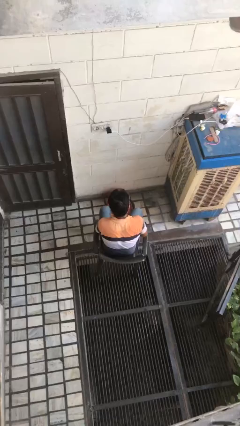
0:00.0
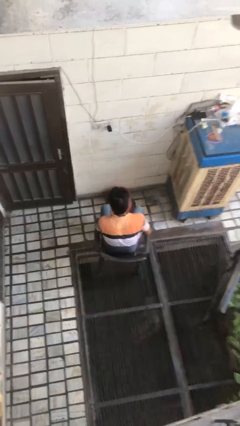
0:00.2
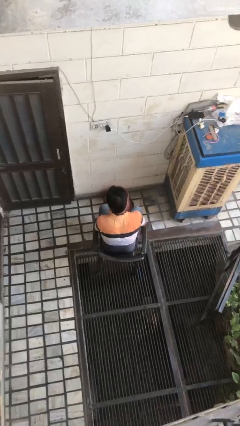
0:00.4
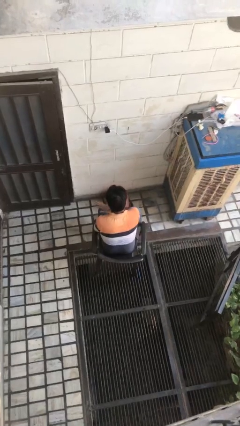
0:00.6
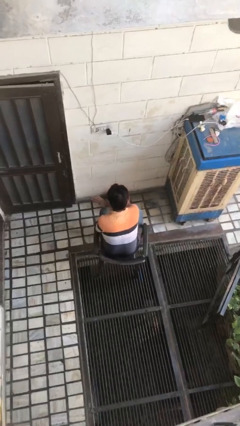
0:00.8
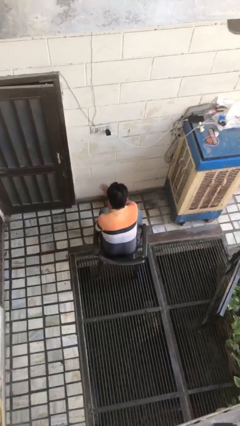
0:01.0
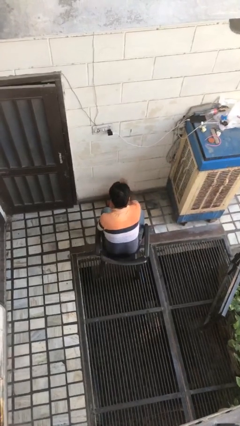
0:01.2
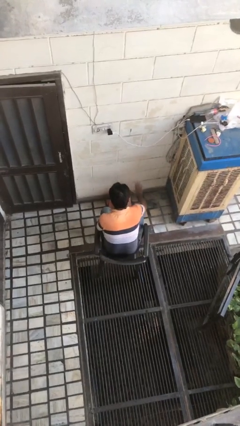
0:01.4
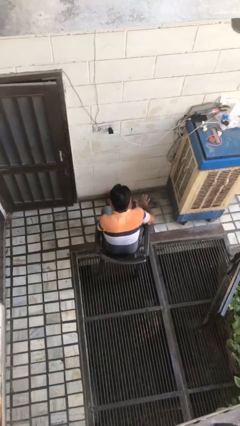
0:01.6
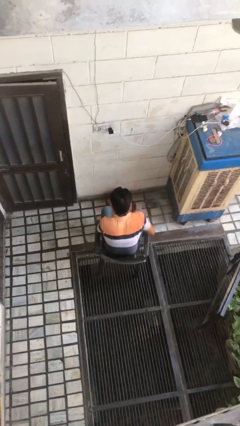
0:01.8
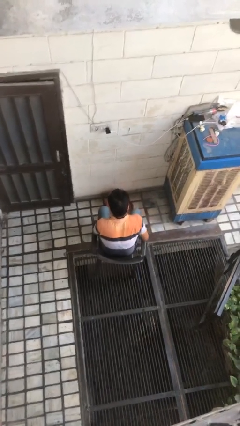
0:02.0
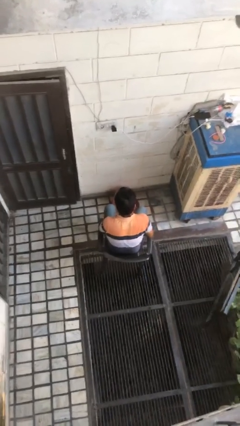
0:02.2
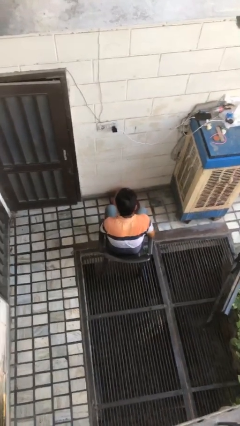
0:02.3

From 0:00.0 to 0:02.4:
person waves hand over object

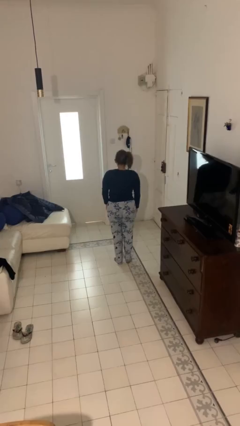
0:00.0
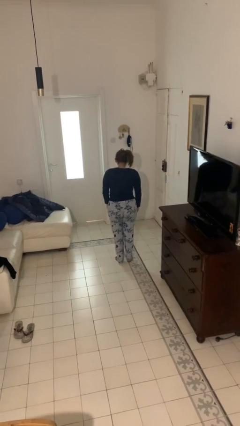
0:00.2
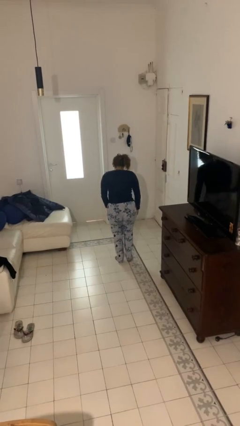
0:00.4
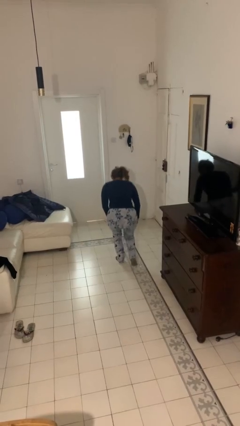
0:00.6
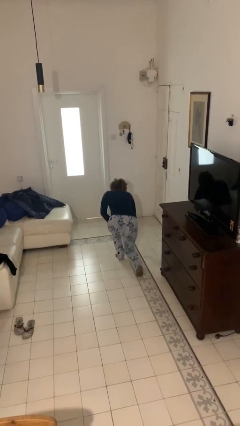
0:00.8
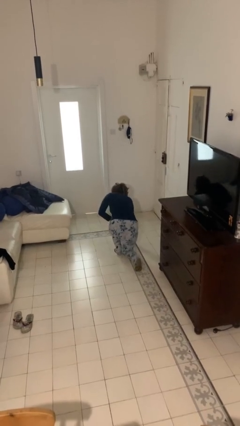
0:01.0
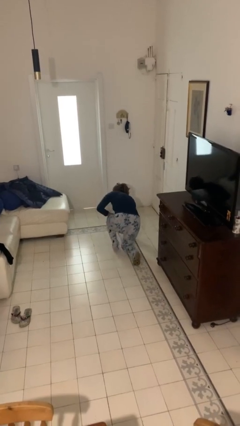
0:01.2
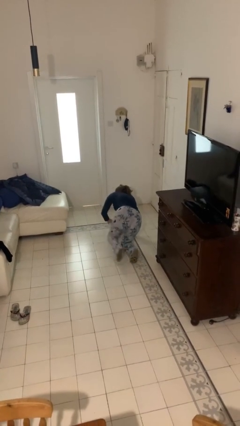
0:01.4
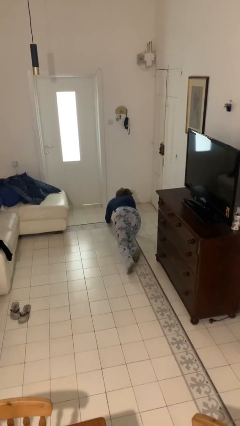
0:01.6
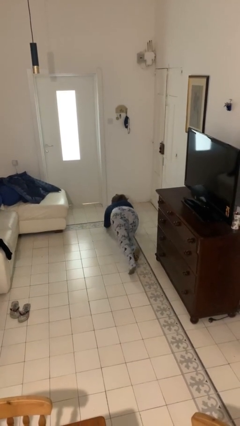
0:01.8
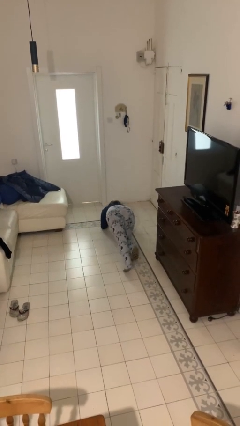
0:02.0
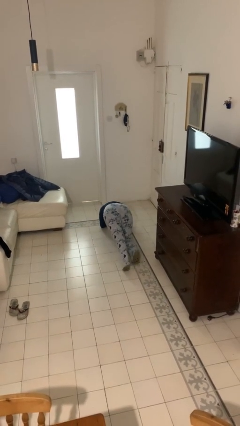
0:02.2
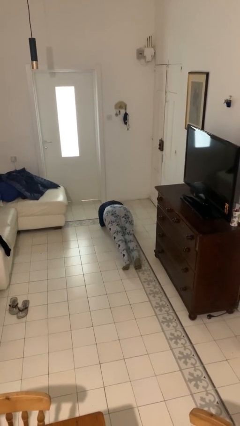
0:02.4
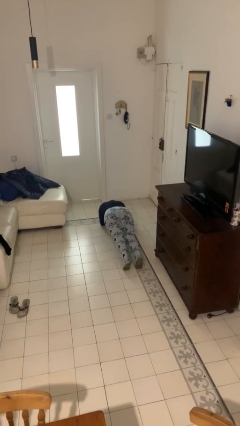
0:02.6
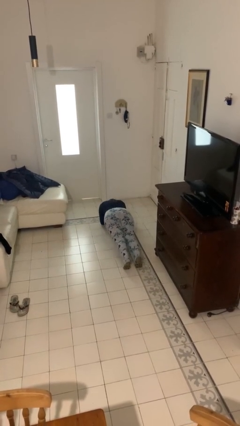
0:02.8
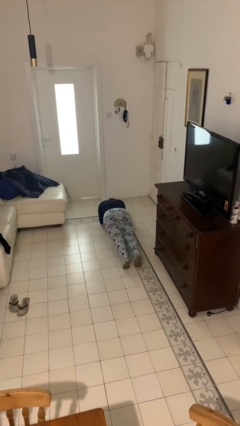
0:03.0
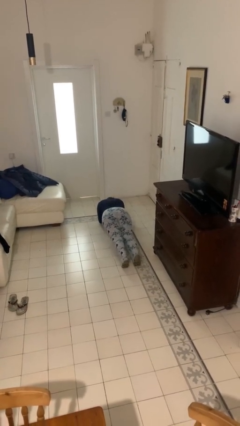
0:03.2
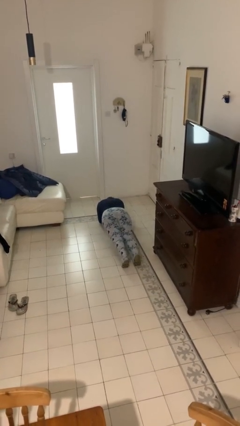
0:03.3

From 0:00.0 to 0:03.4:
person exercises with plank

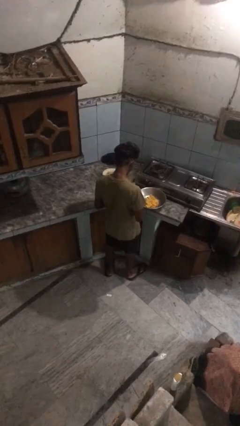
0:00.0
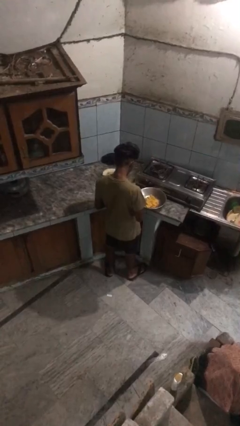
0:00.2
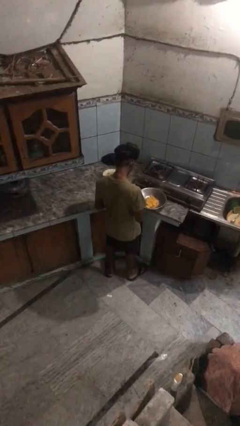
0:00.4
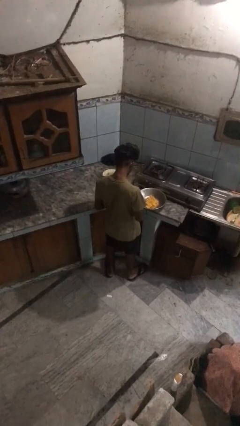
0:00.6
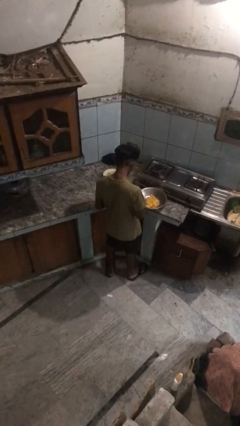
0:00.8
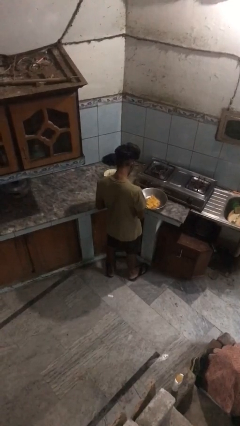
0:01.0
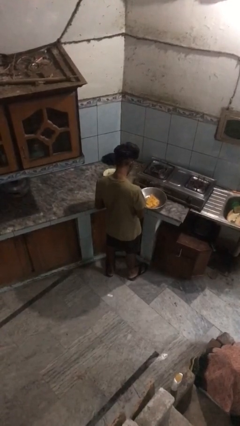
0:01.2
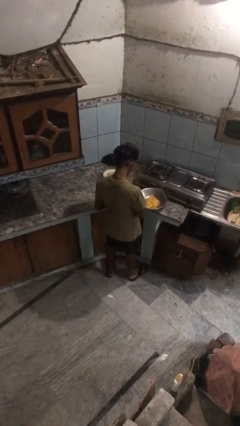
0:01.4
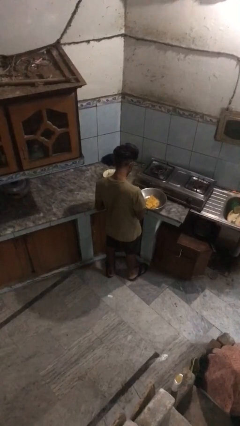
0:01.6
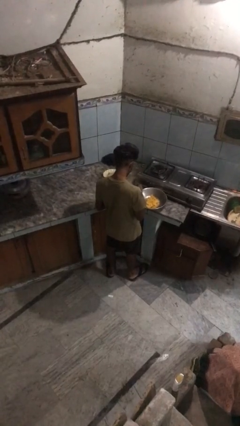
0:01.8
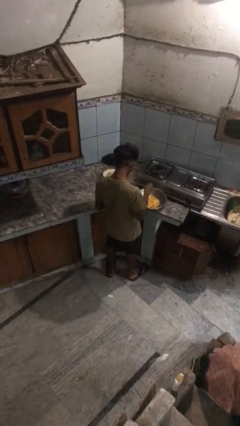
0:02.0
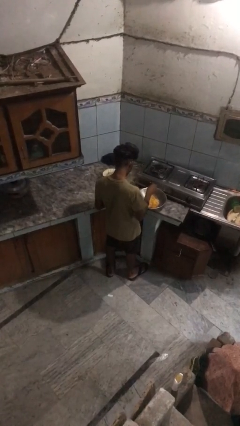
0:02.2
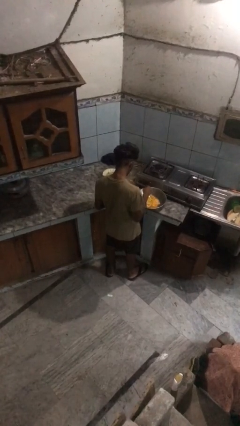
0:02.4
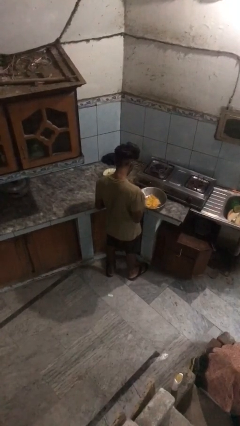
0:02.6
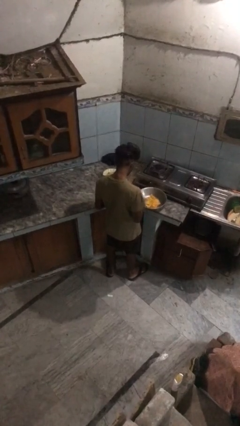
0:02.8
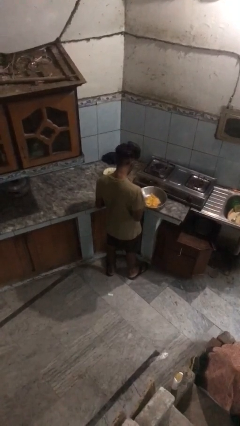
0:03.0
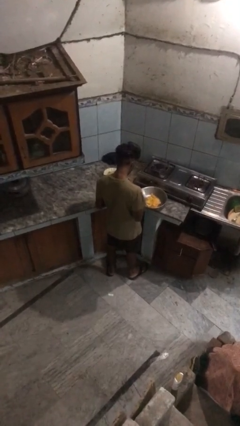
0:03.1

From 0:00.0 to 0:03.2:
person pours into bowl

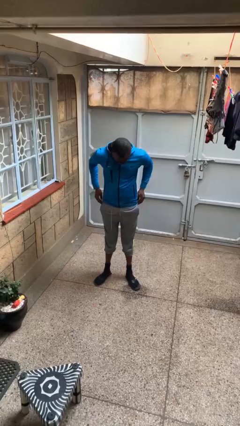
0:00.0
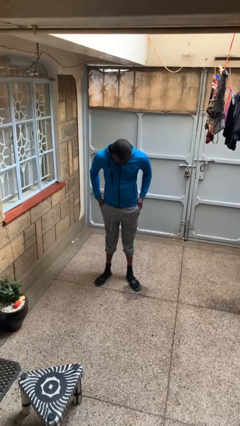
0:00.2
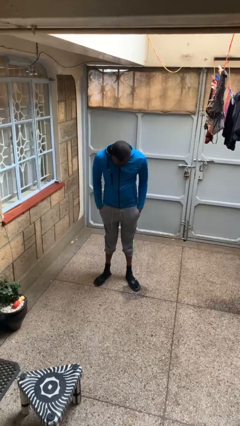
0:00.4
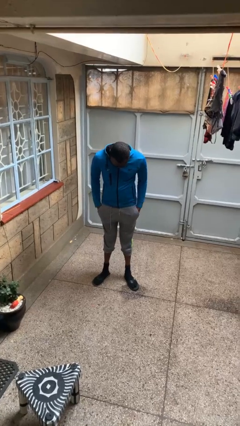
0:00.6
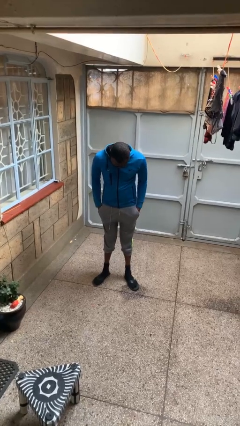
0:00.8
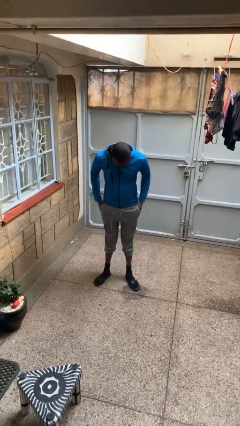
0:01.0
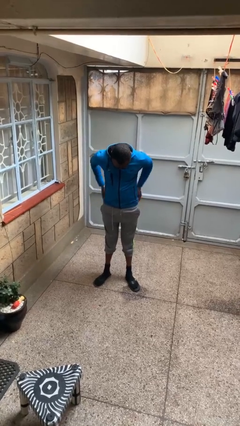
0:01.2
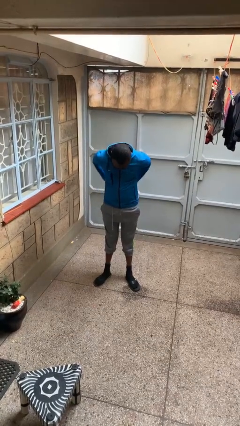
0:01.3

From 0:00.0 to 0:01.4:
person puts hands in back pockets

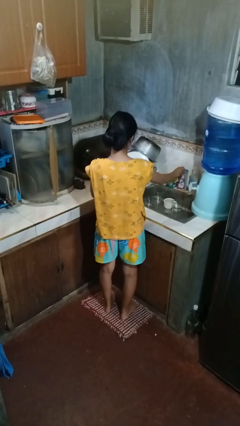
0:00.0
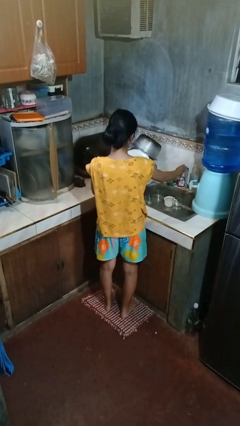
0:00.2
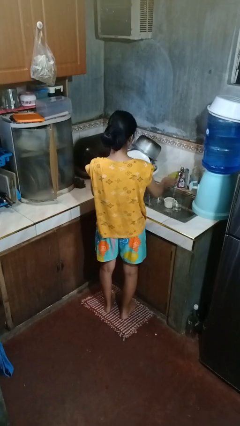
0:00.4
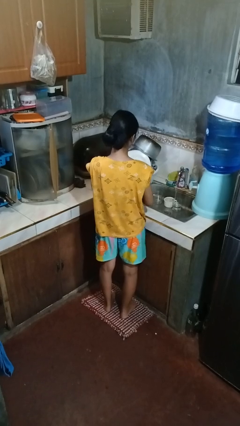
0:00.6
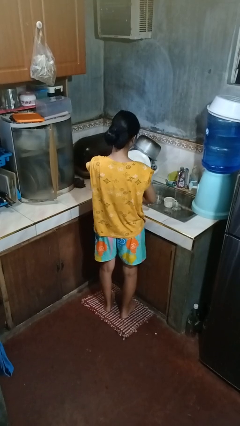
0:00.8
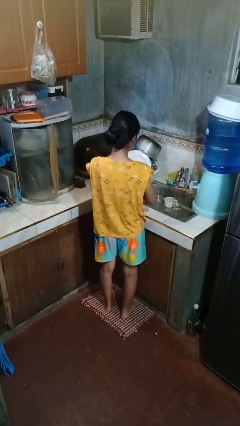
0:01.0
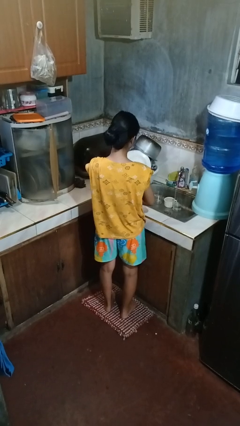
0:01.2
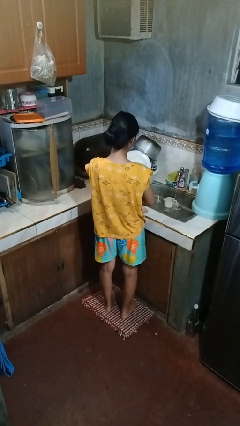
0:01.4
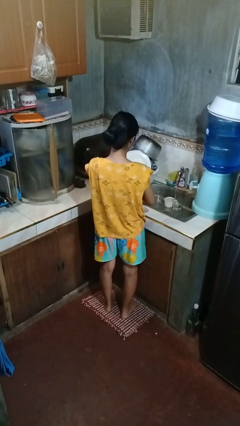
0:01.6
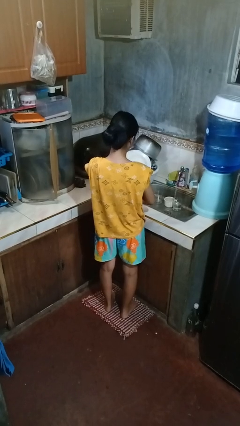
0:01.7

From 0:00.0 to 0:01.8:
person turns on faucet

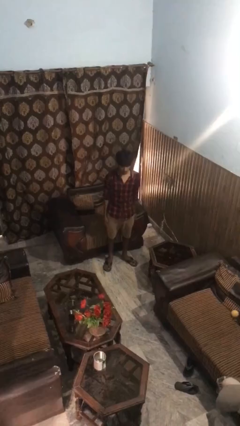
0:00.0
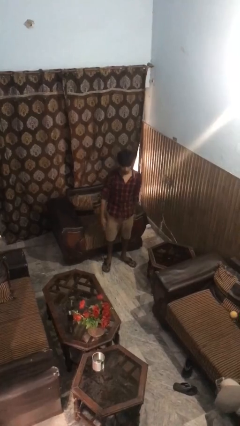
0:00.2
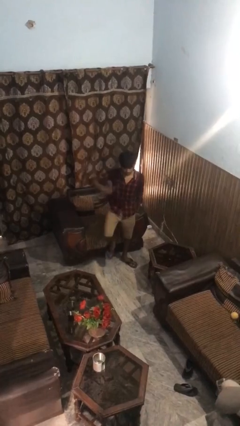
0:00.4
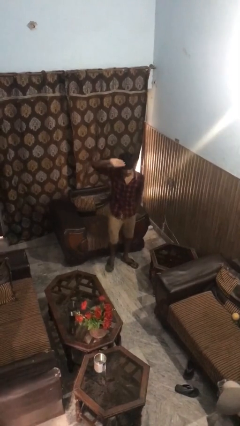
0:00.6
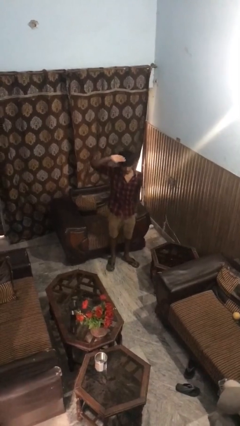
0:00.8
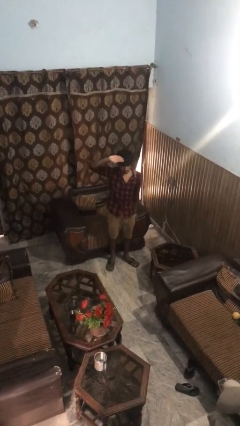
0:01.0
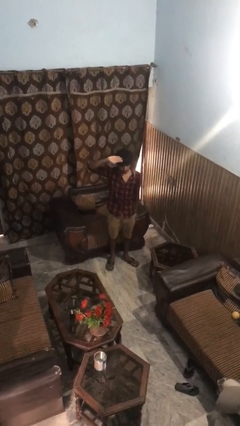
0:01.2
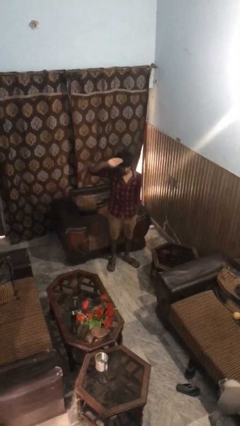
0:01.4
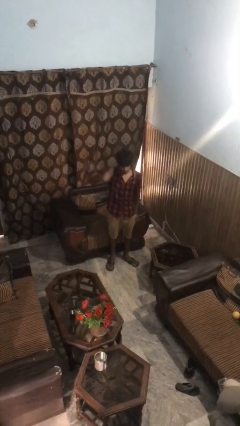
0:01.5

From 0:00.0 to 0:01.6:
person salutes

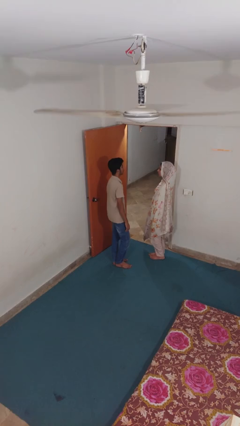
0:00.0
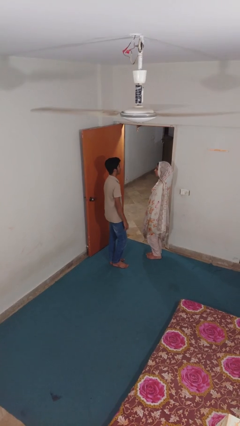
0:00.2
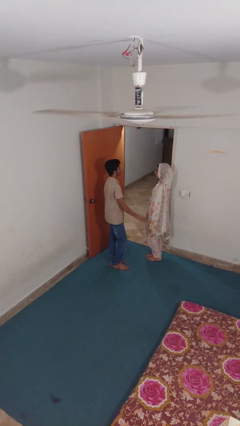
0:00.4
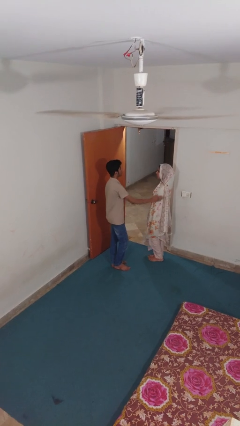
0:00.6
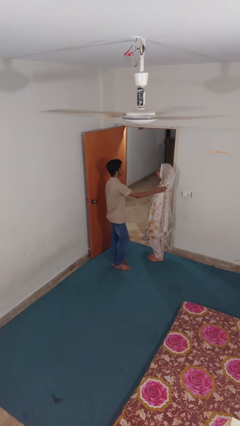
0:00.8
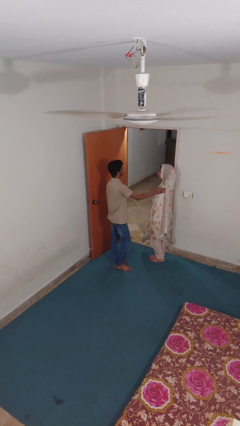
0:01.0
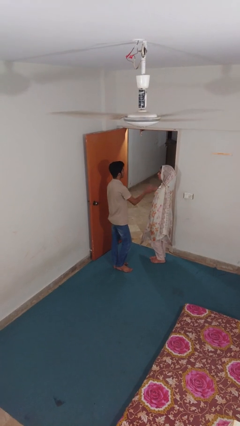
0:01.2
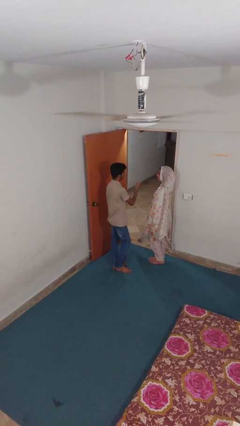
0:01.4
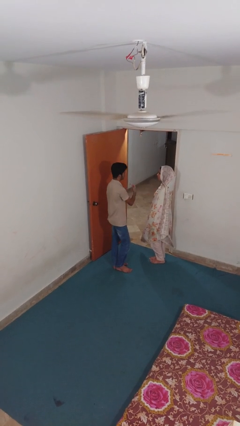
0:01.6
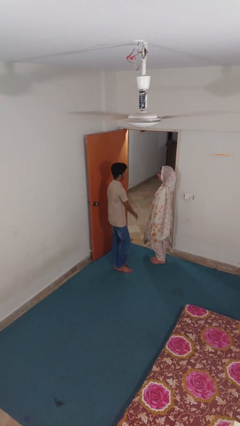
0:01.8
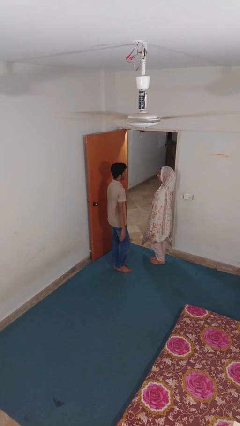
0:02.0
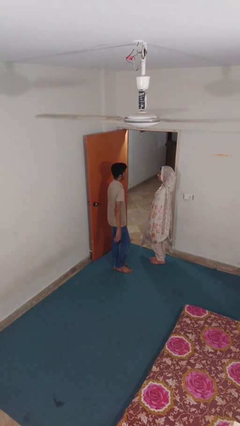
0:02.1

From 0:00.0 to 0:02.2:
person shoves person

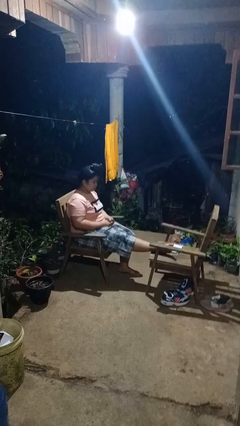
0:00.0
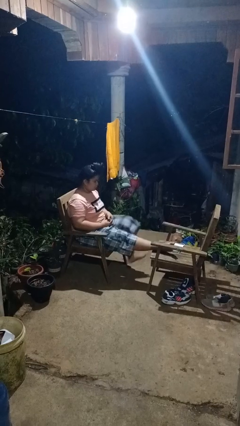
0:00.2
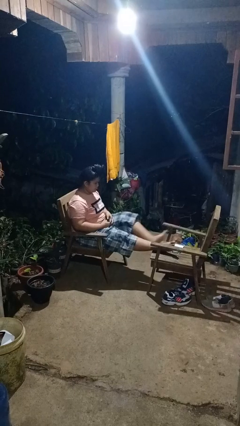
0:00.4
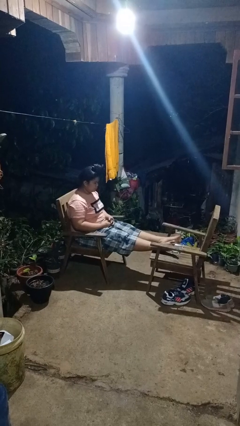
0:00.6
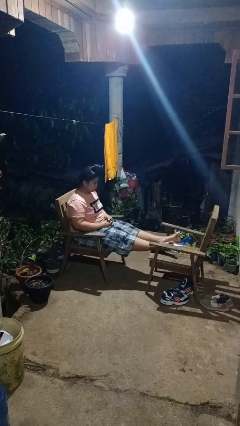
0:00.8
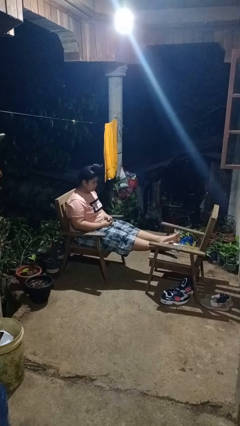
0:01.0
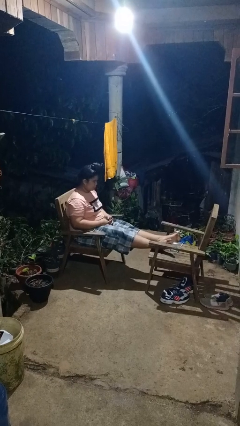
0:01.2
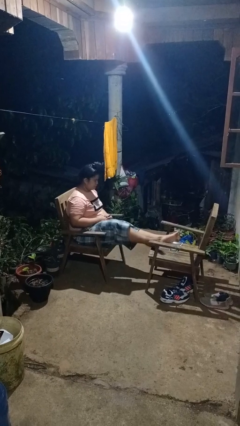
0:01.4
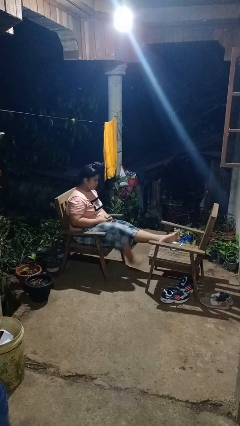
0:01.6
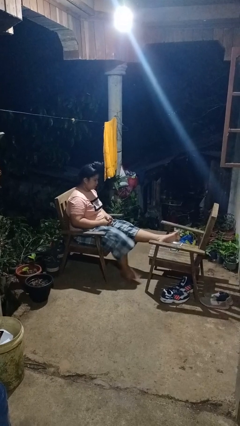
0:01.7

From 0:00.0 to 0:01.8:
person puts feet up
